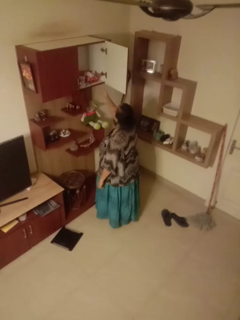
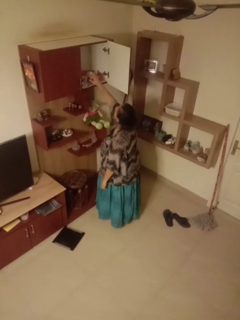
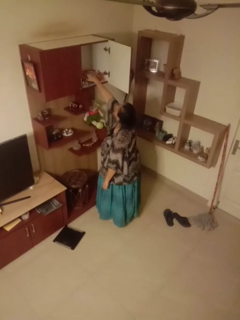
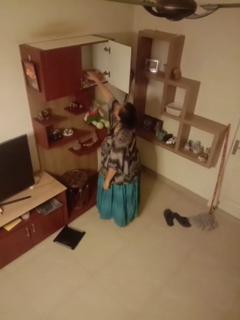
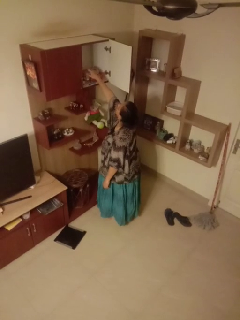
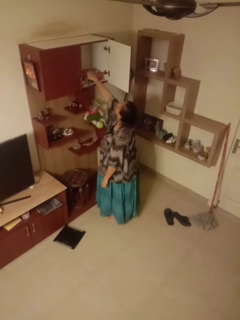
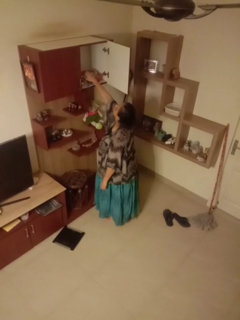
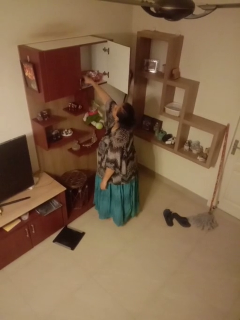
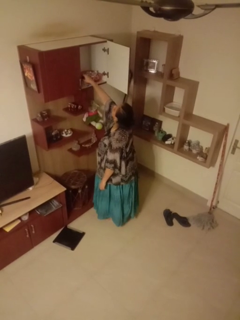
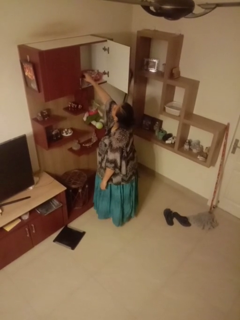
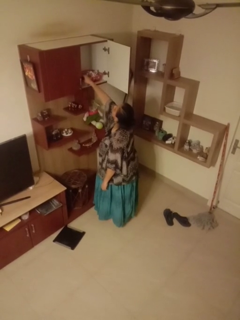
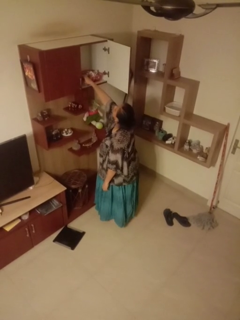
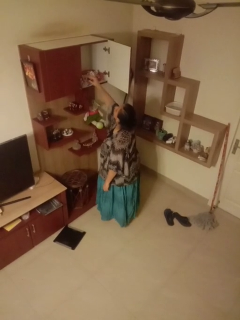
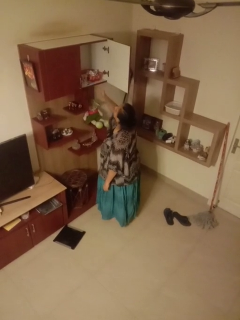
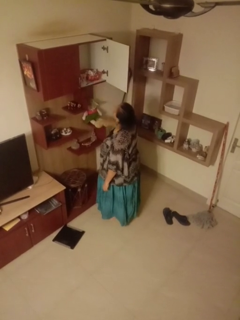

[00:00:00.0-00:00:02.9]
person searches in cabinet

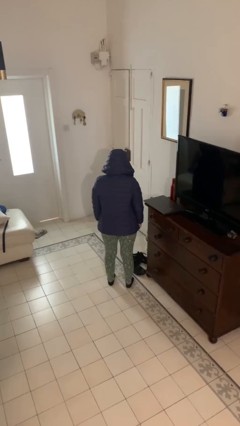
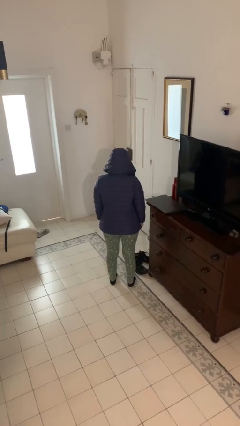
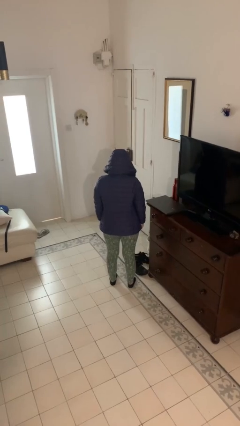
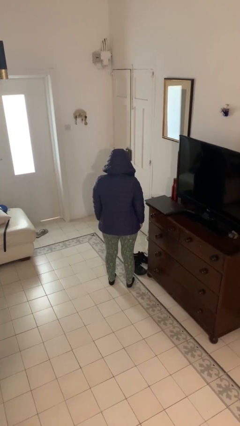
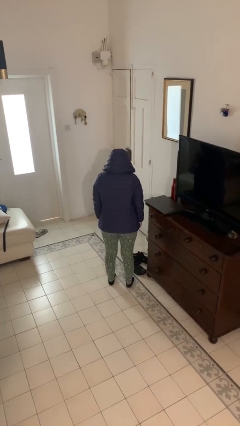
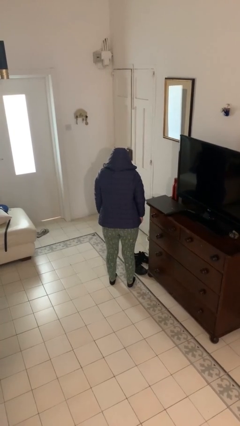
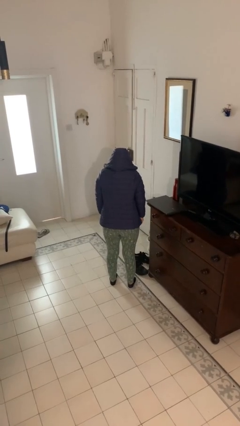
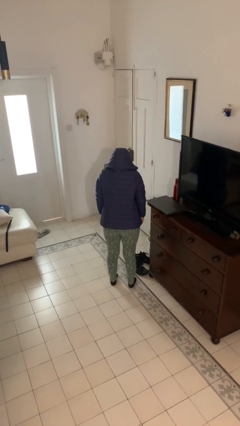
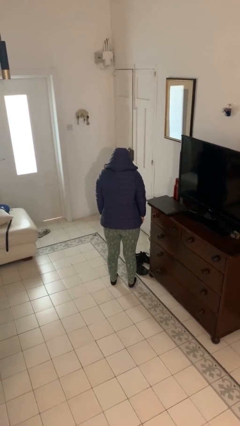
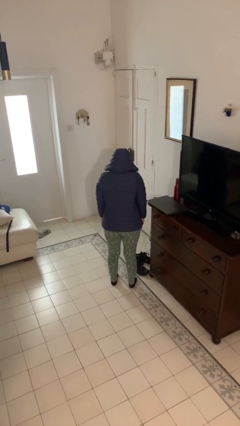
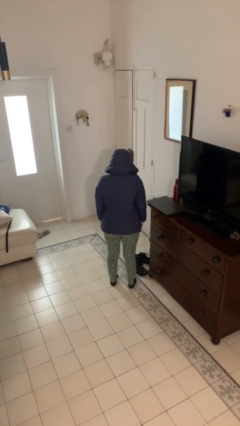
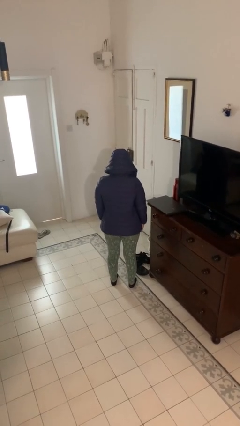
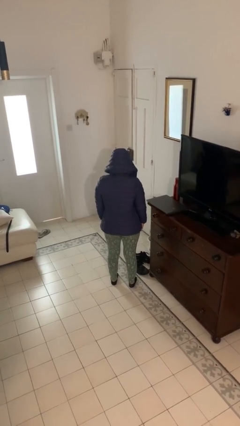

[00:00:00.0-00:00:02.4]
person shrugs

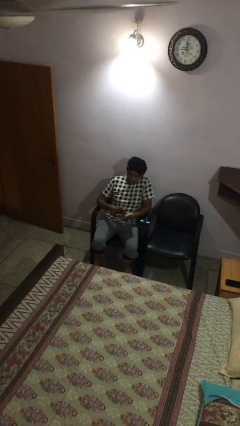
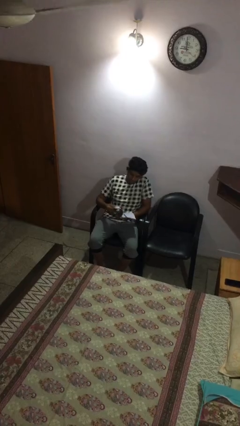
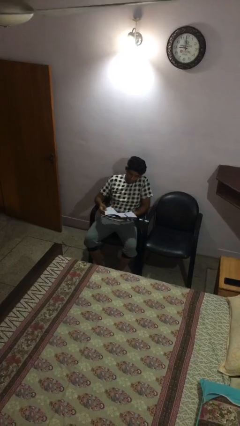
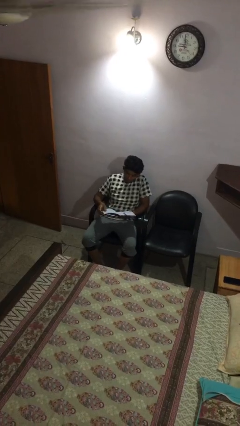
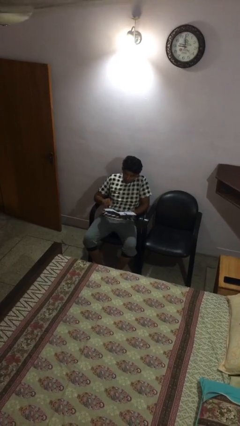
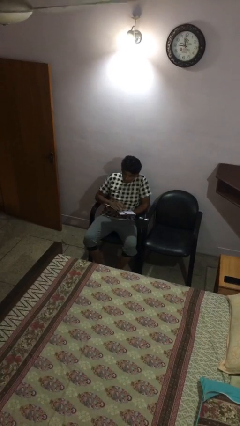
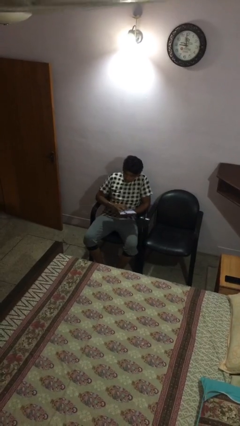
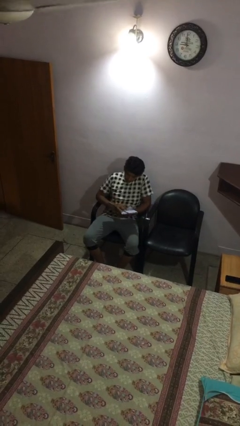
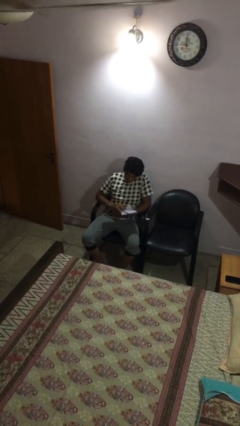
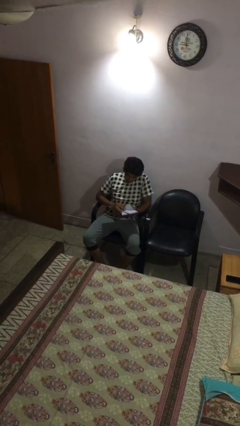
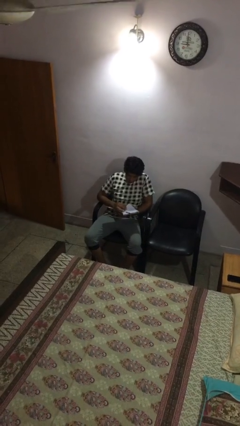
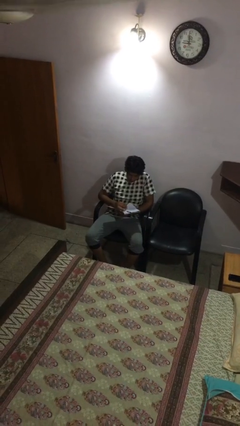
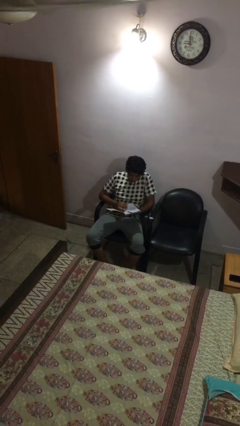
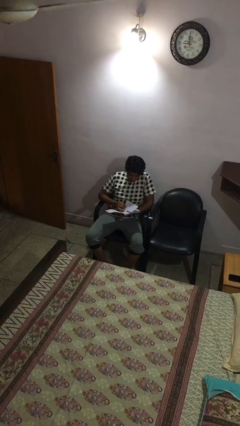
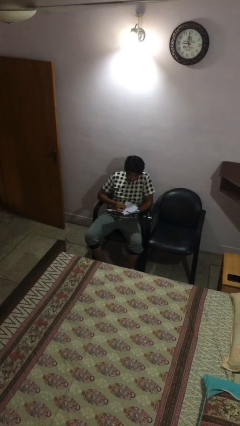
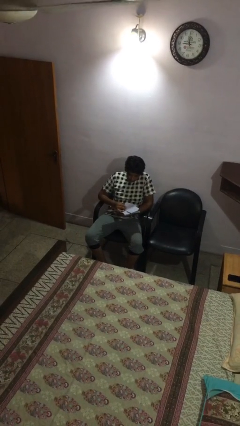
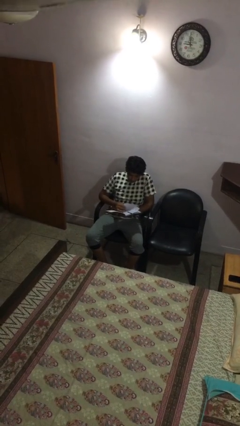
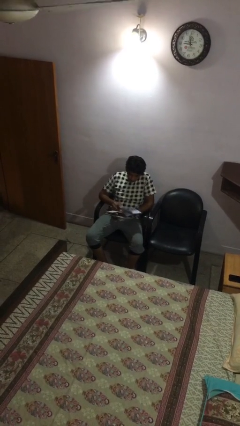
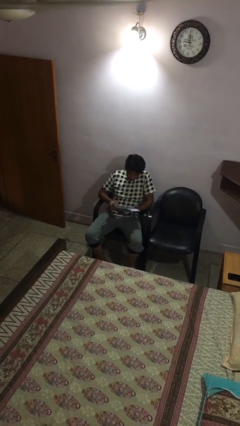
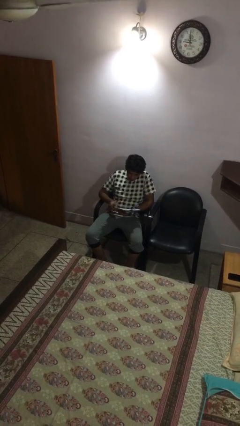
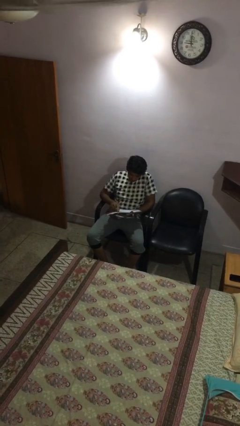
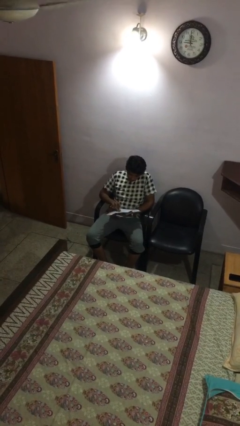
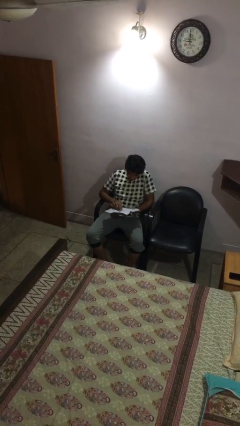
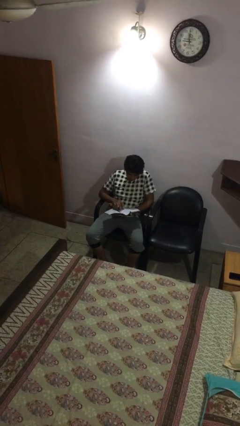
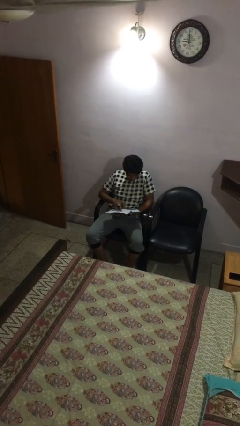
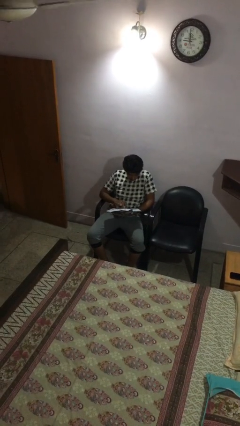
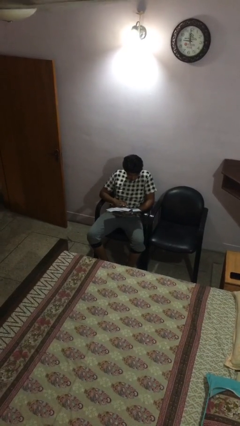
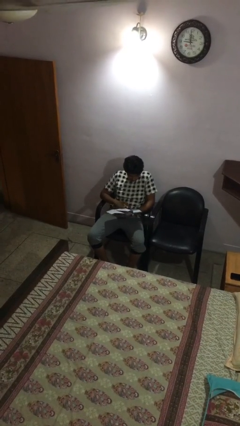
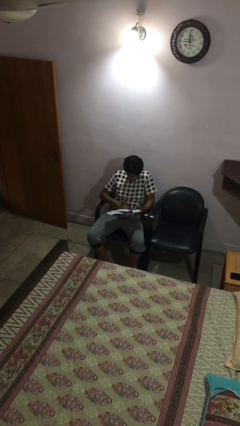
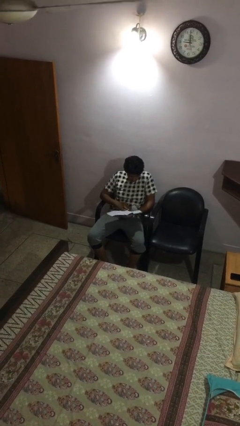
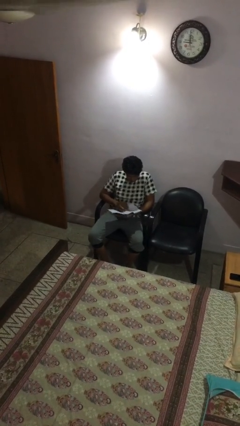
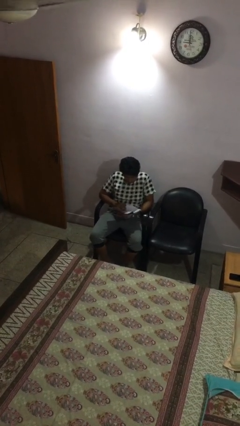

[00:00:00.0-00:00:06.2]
person reads document

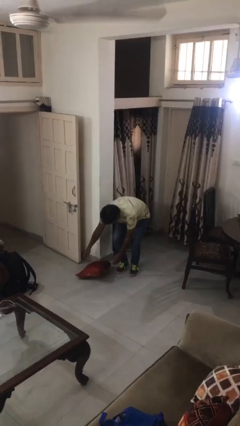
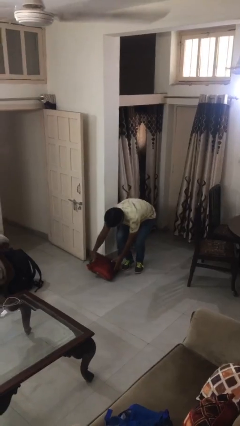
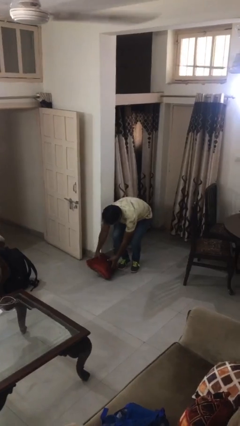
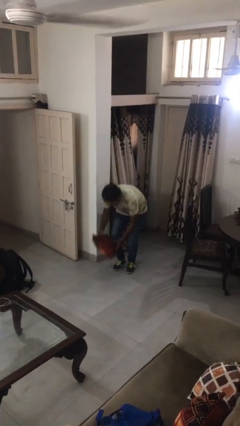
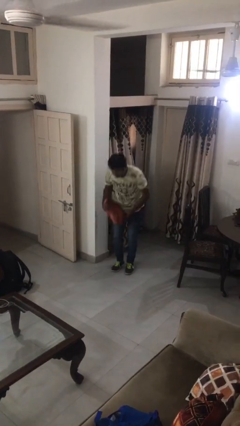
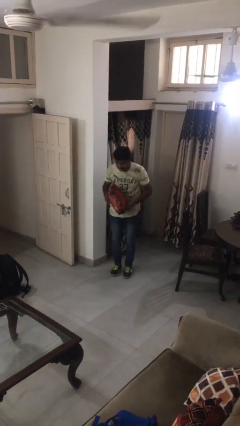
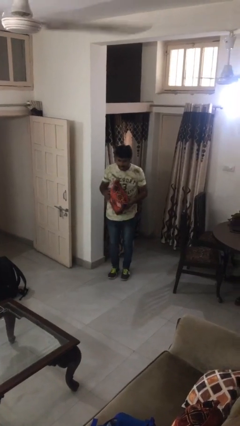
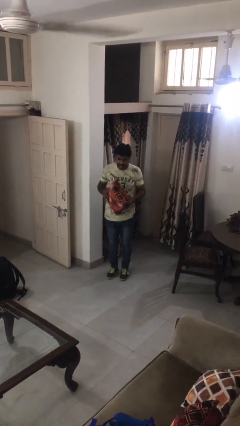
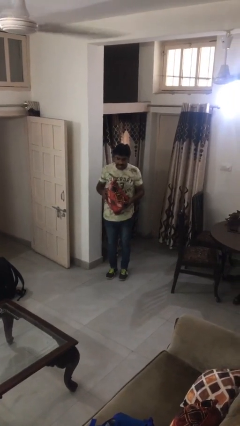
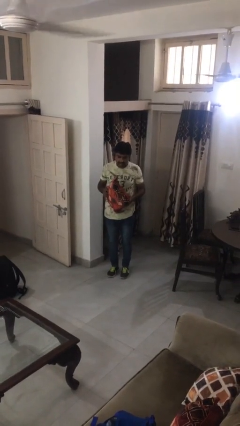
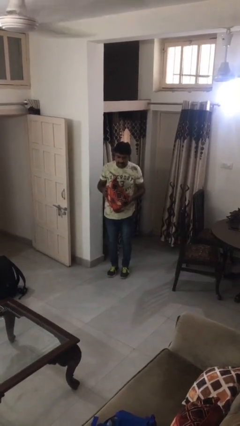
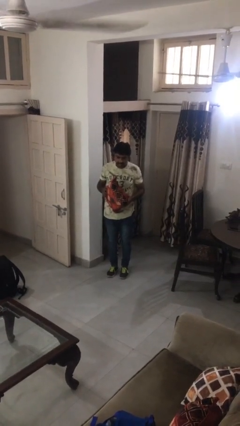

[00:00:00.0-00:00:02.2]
person picks up object from floor

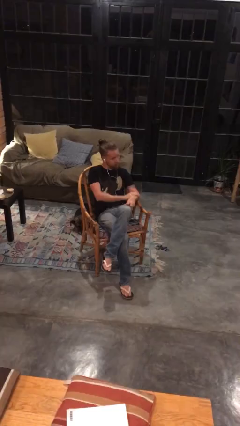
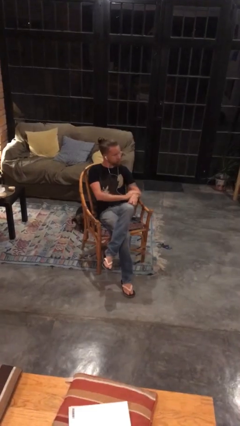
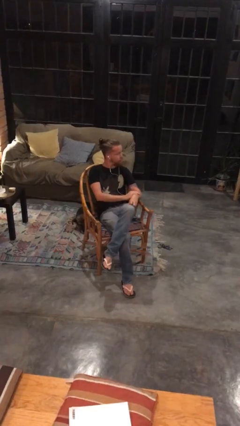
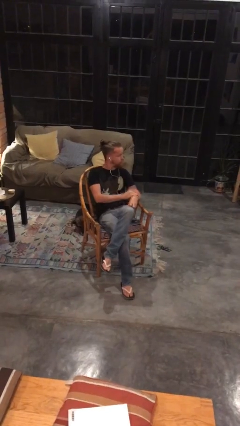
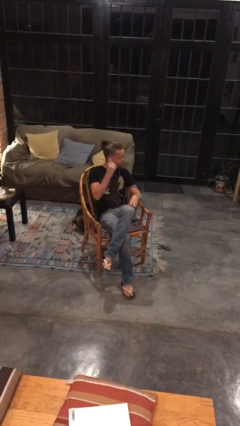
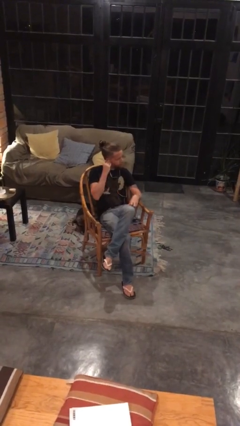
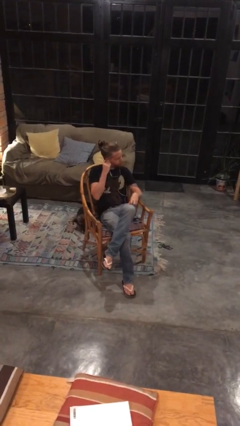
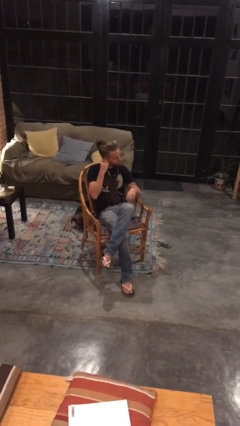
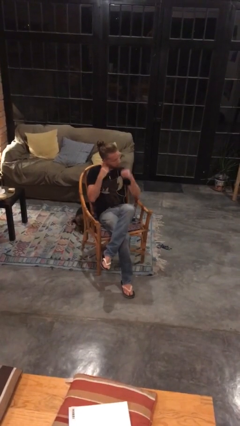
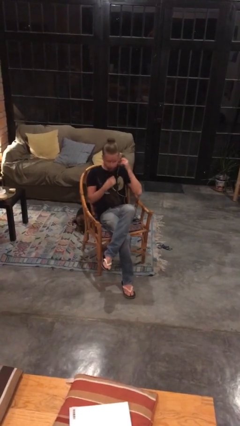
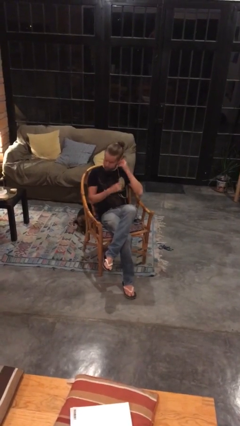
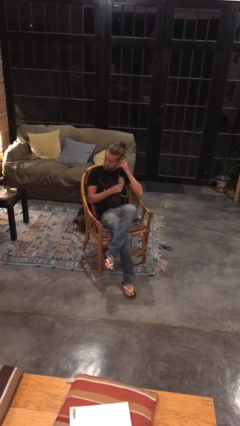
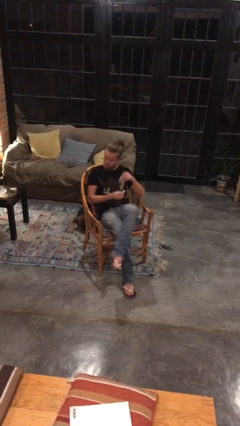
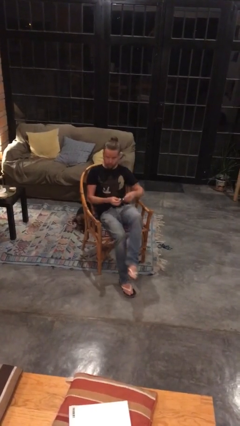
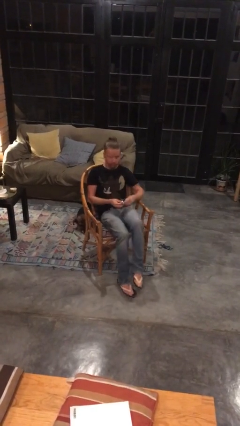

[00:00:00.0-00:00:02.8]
person takes off headphones

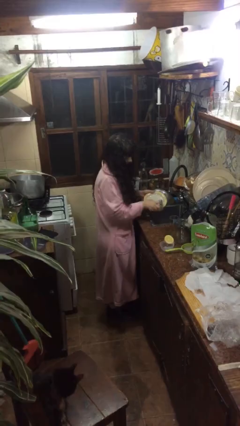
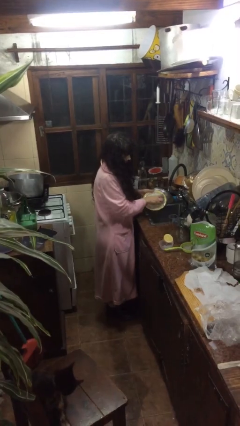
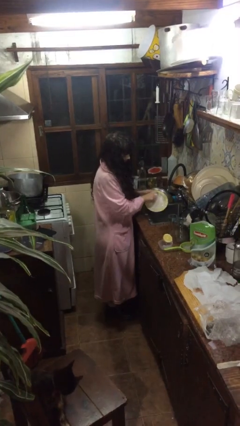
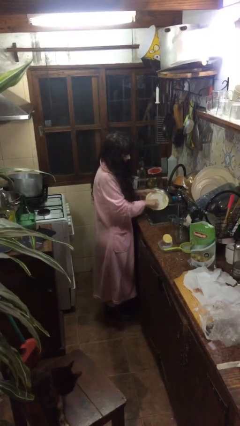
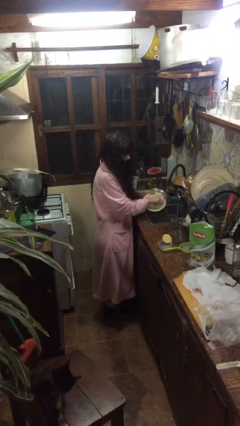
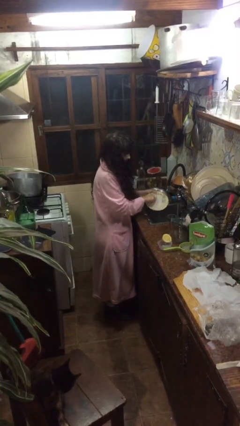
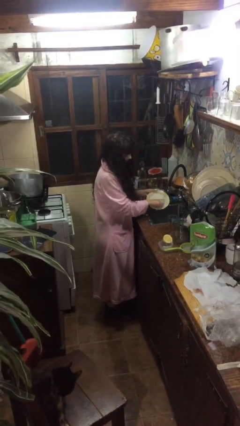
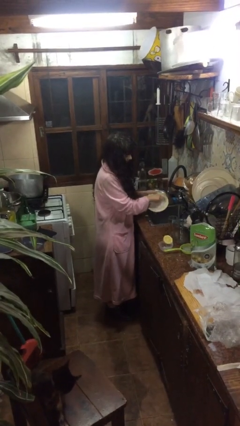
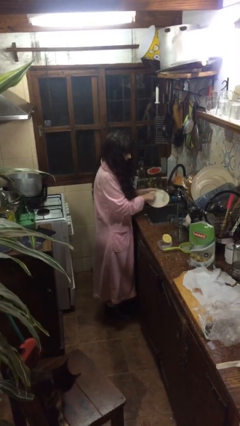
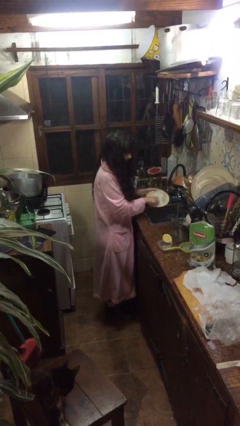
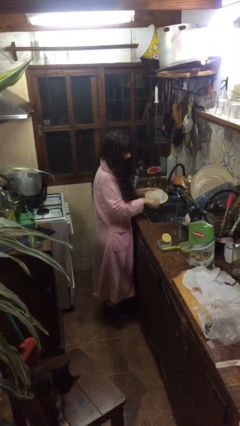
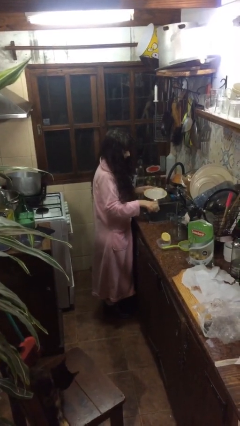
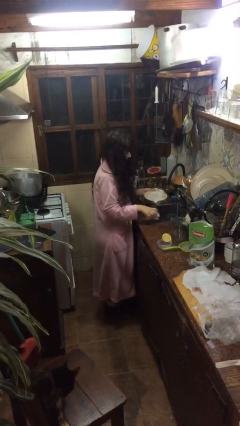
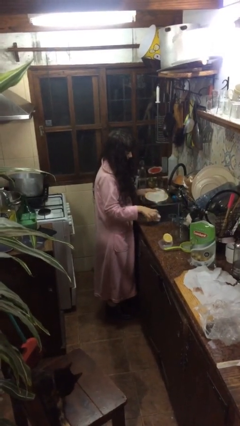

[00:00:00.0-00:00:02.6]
person washes dish
